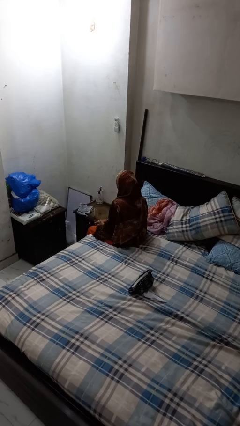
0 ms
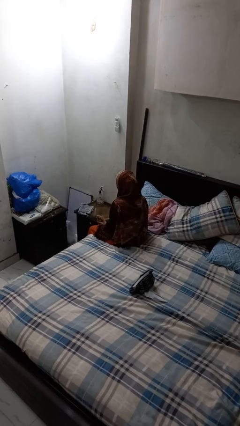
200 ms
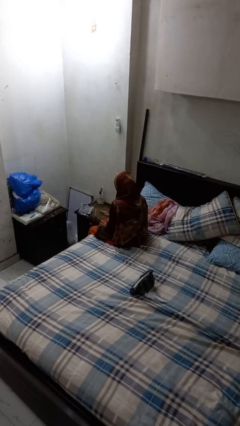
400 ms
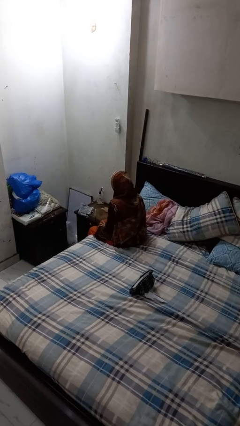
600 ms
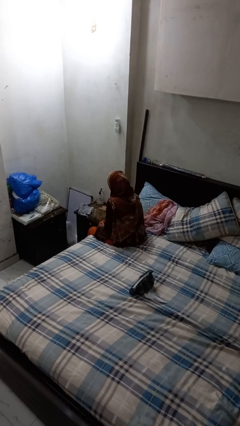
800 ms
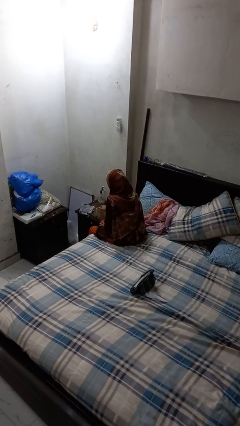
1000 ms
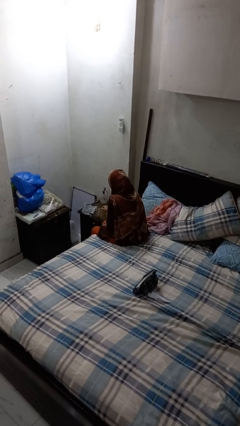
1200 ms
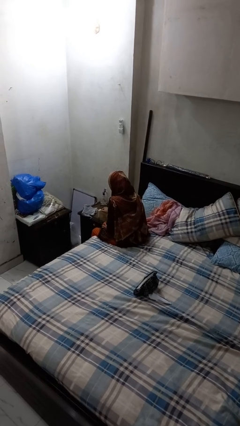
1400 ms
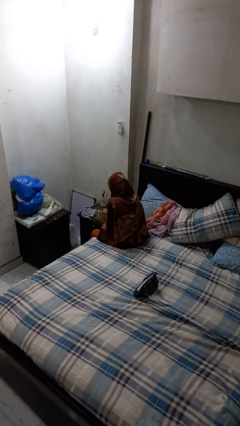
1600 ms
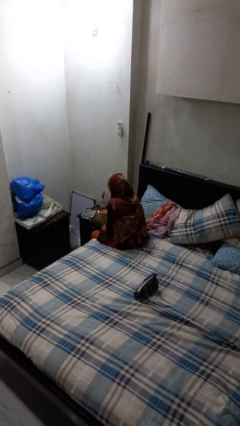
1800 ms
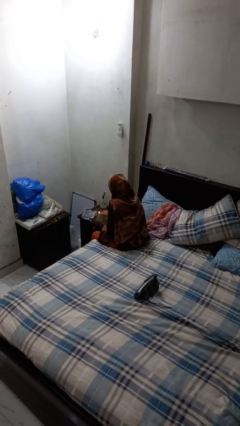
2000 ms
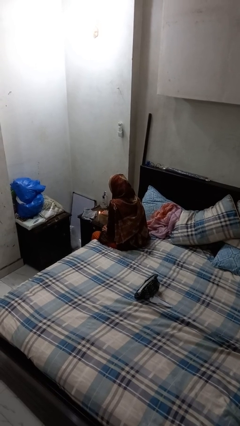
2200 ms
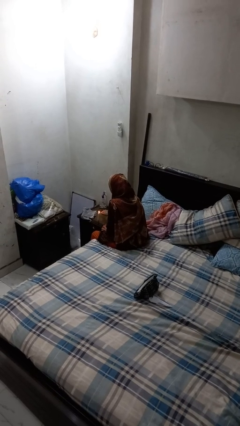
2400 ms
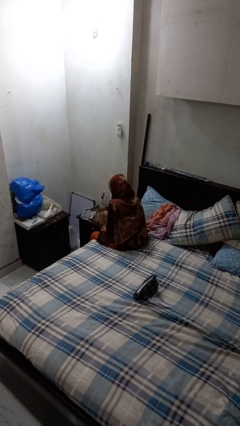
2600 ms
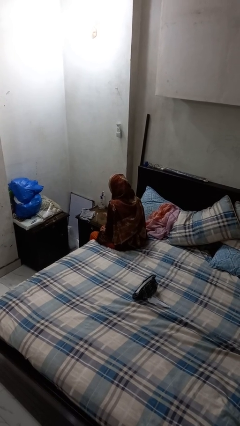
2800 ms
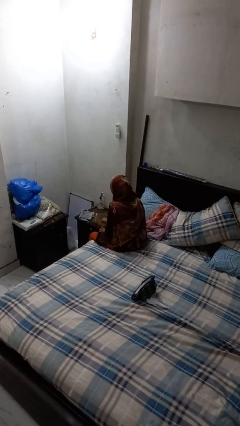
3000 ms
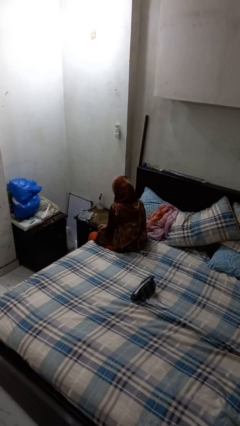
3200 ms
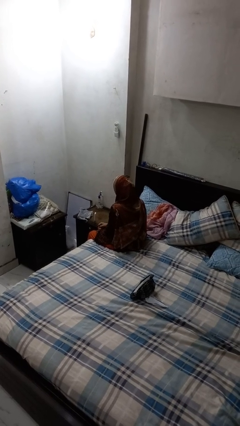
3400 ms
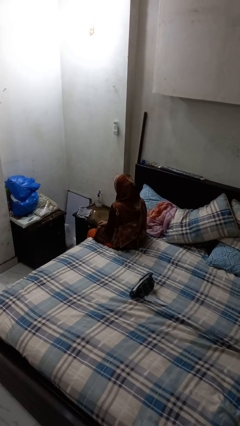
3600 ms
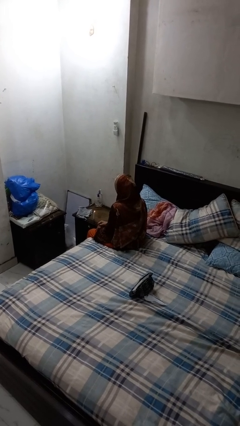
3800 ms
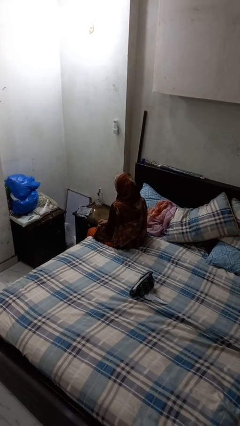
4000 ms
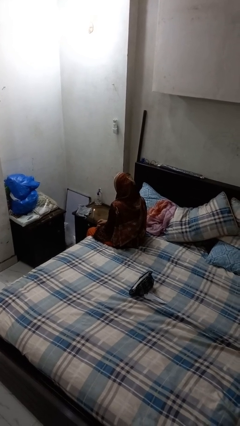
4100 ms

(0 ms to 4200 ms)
person lights candle

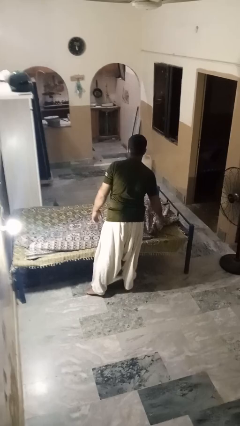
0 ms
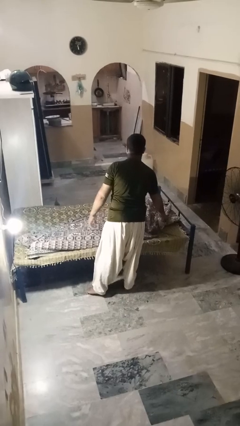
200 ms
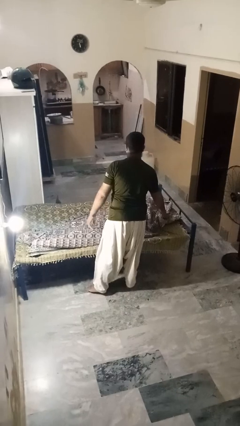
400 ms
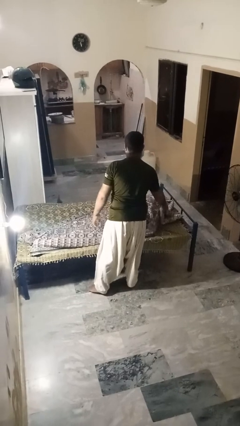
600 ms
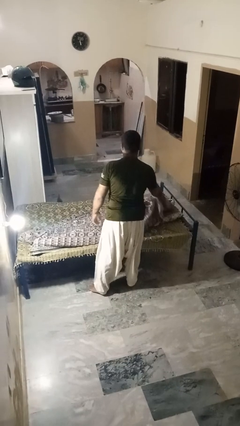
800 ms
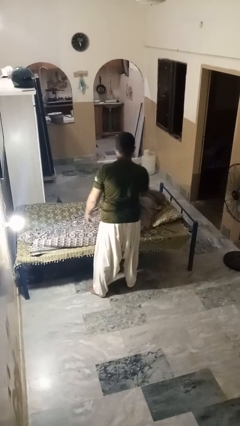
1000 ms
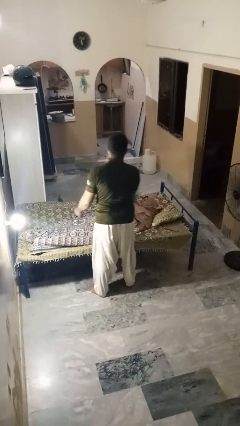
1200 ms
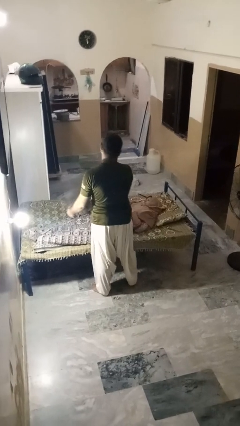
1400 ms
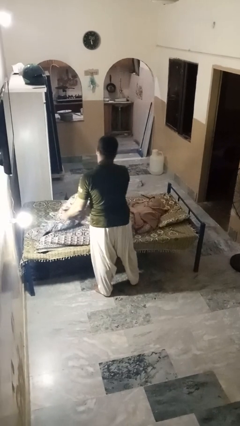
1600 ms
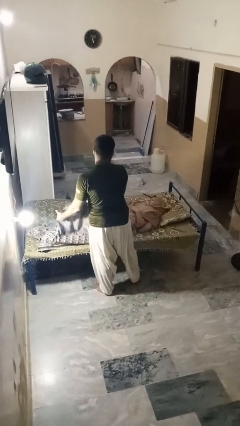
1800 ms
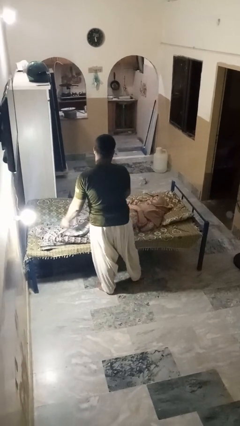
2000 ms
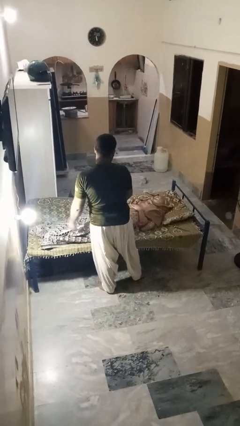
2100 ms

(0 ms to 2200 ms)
person uncovers friend with blanket

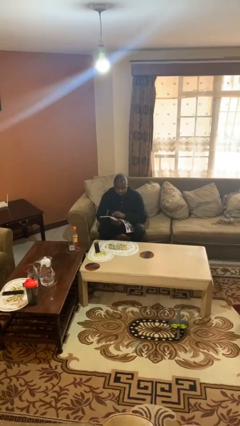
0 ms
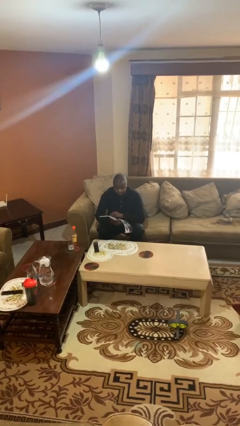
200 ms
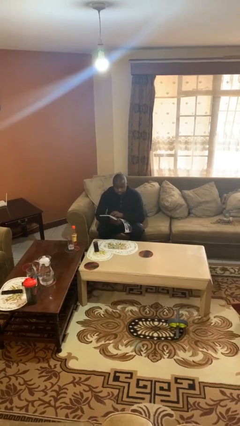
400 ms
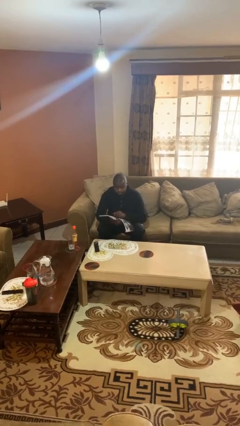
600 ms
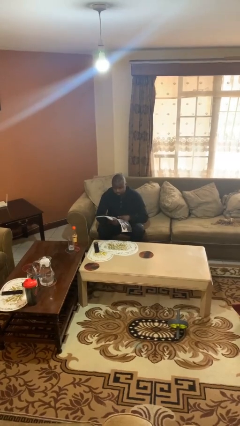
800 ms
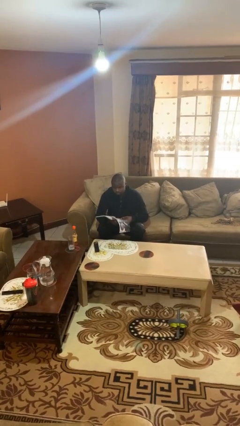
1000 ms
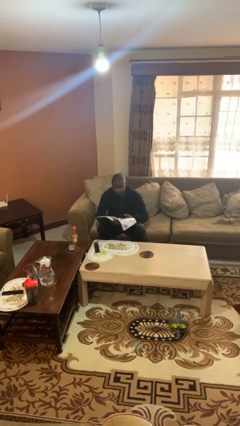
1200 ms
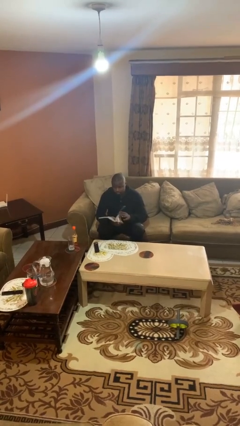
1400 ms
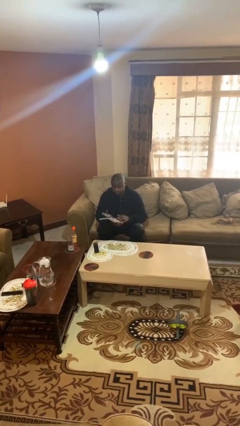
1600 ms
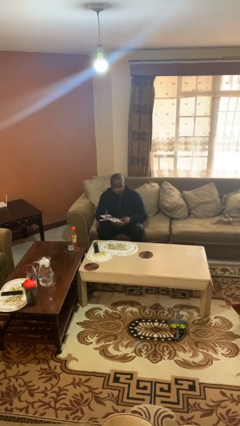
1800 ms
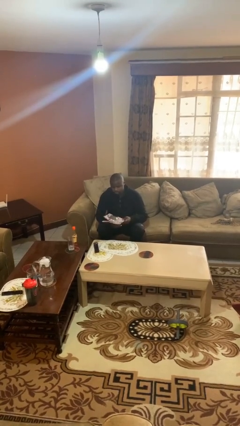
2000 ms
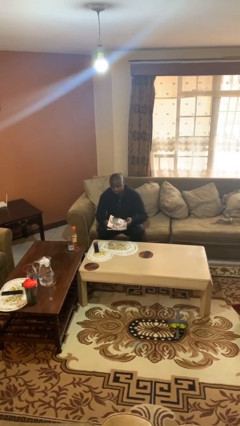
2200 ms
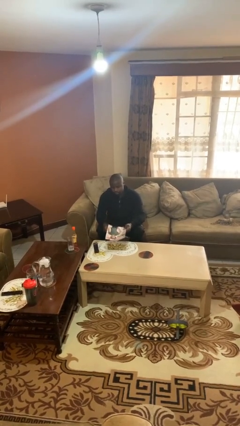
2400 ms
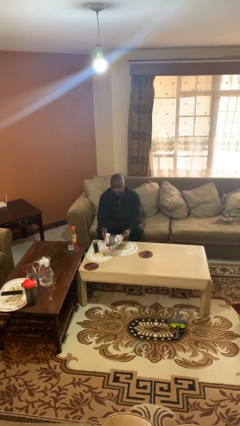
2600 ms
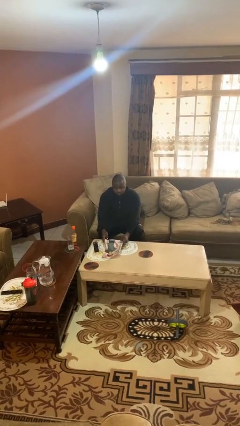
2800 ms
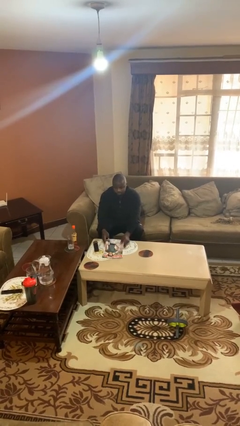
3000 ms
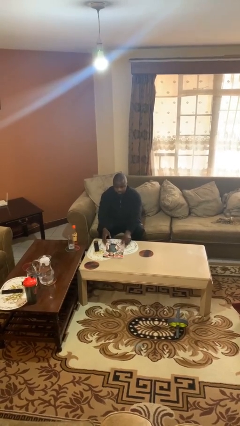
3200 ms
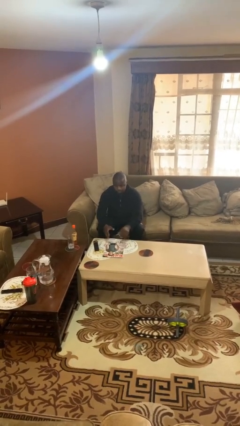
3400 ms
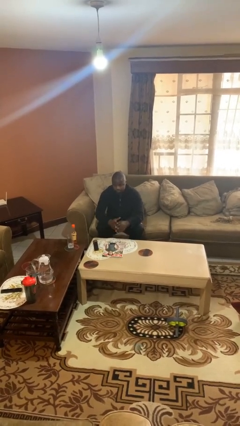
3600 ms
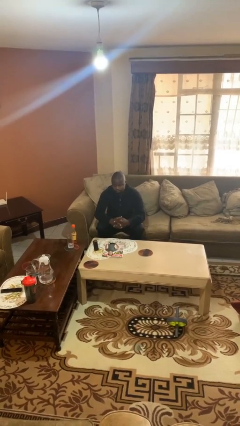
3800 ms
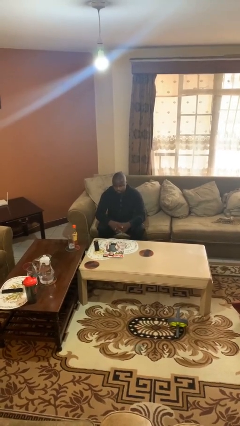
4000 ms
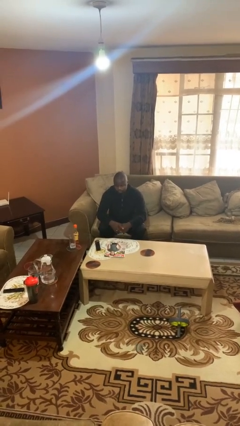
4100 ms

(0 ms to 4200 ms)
person puts down object on table

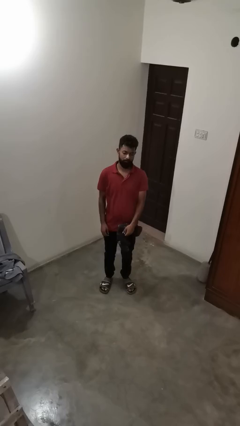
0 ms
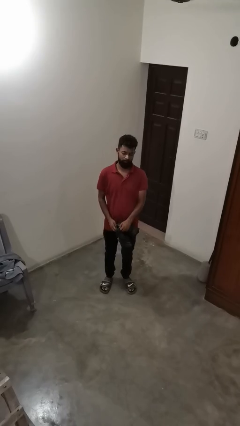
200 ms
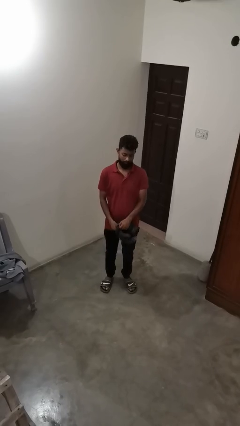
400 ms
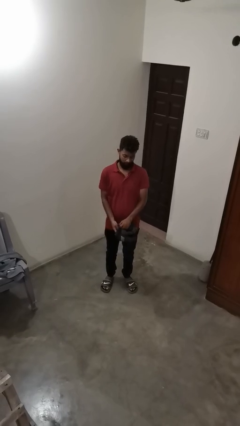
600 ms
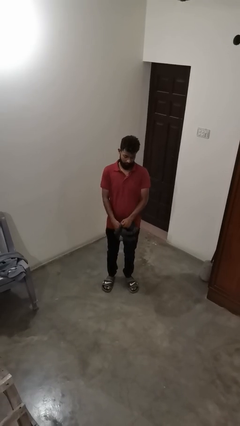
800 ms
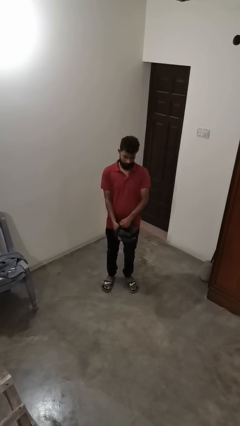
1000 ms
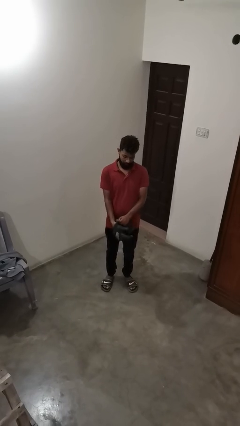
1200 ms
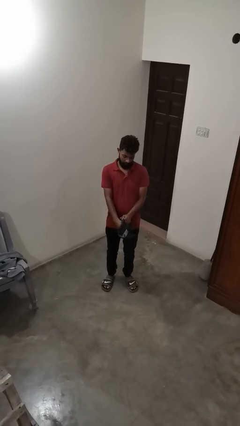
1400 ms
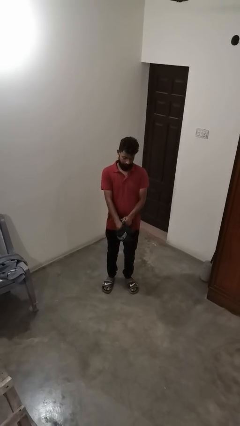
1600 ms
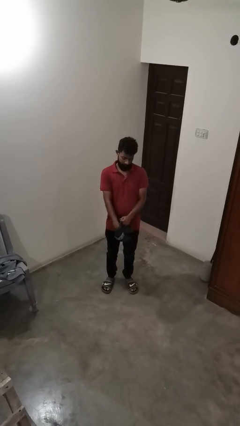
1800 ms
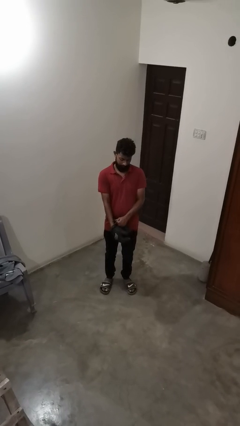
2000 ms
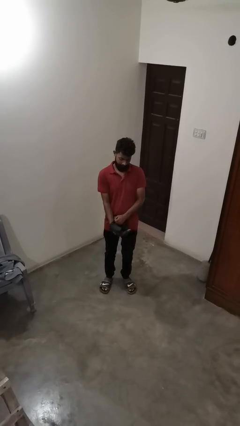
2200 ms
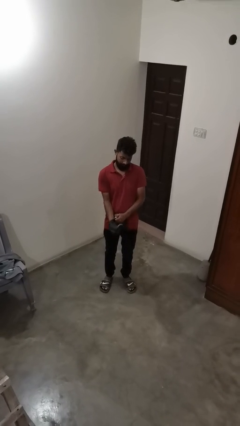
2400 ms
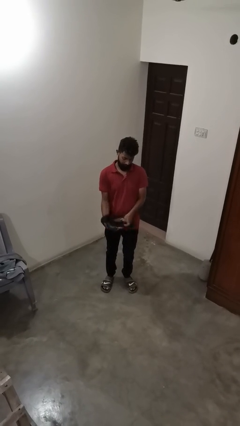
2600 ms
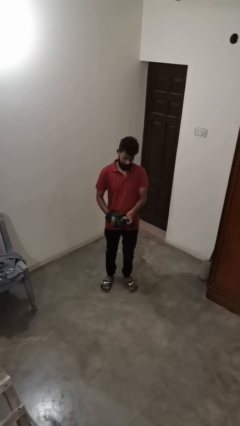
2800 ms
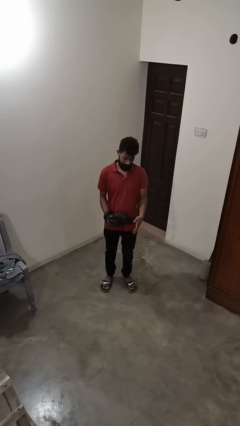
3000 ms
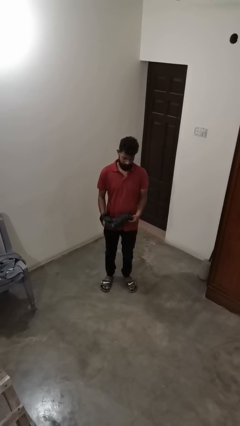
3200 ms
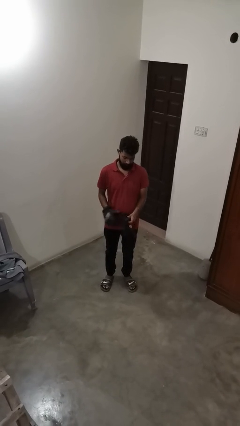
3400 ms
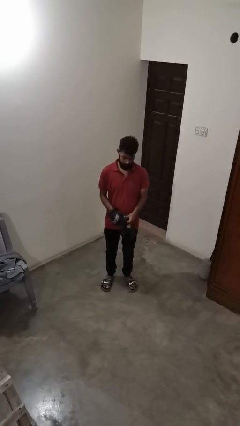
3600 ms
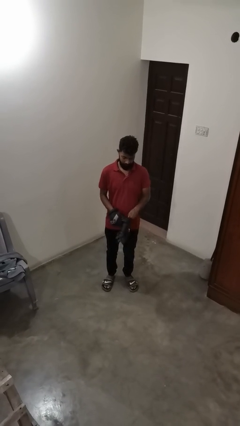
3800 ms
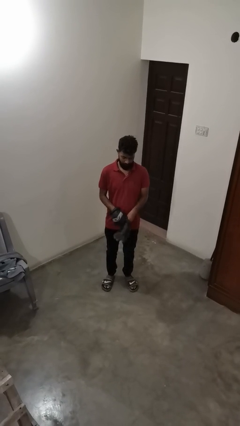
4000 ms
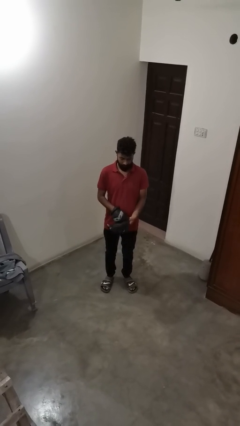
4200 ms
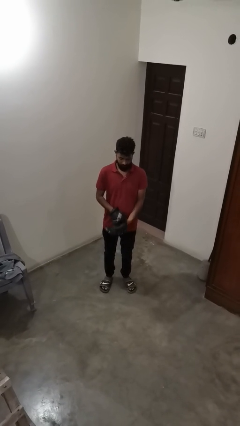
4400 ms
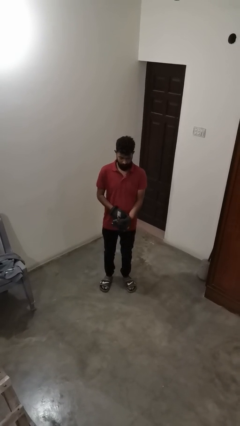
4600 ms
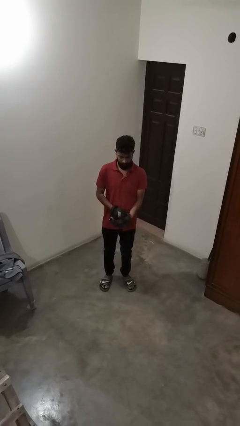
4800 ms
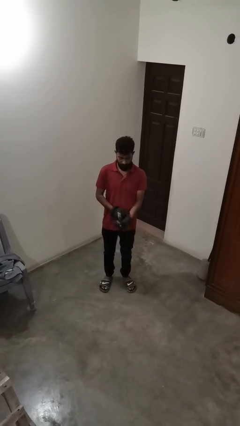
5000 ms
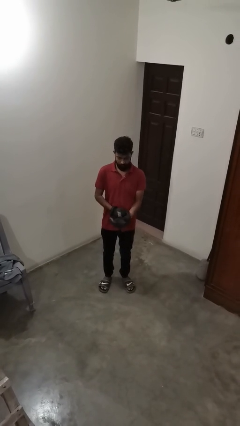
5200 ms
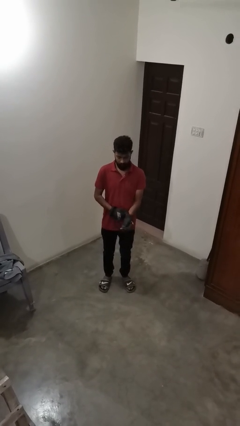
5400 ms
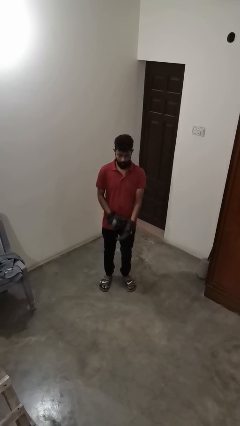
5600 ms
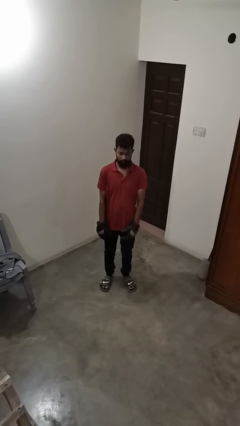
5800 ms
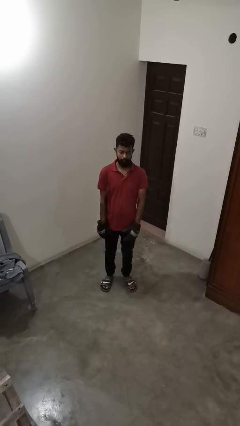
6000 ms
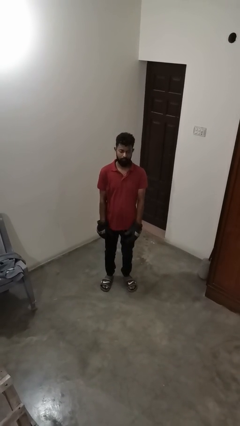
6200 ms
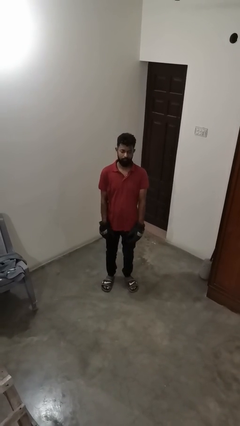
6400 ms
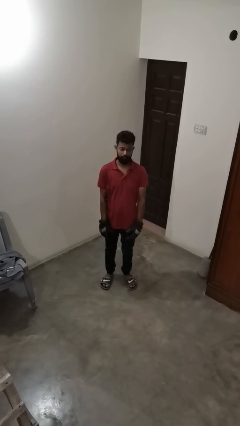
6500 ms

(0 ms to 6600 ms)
person puts on gloves

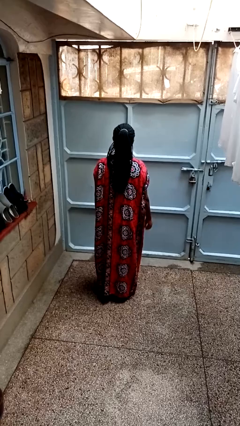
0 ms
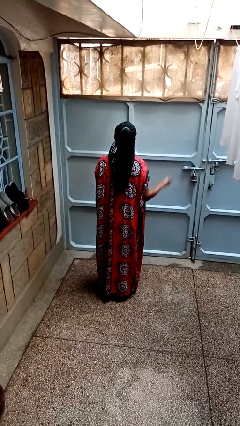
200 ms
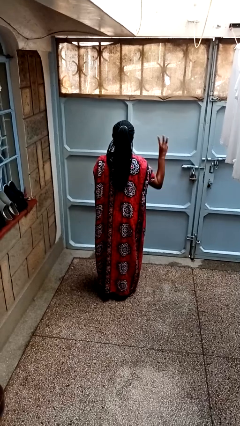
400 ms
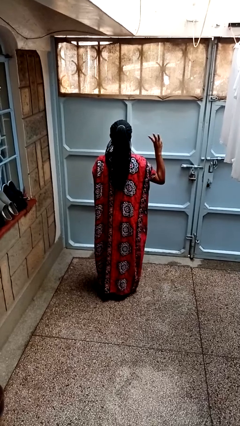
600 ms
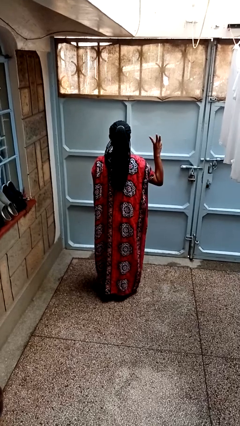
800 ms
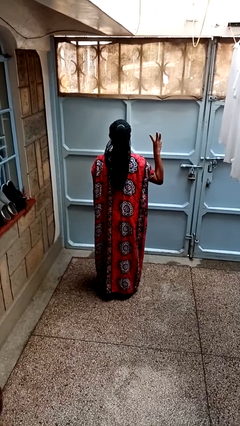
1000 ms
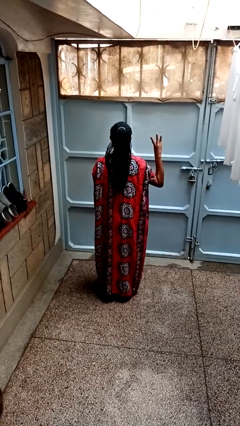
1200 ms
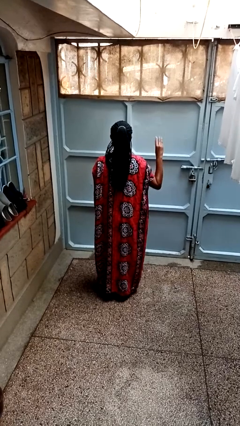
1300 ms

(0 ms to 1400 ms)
person gestures number three
